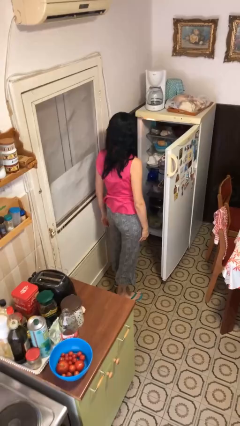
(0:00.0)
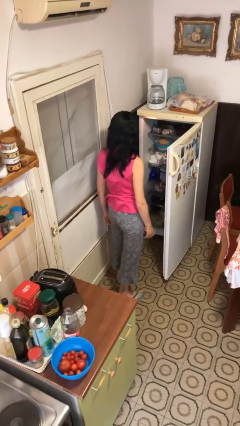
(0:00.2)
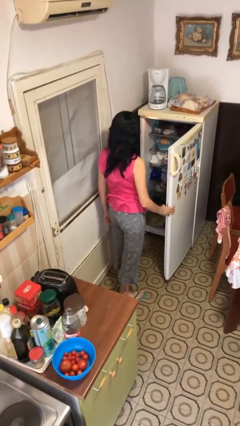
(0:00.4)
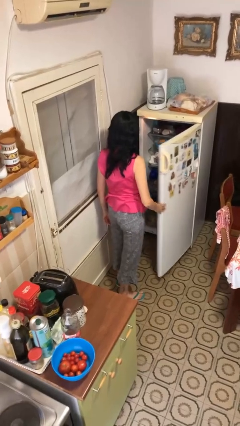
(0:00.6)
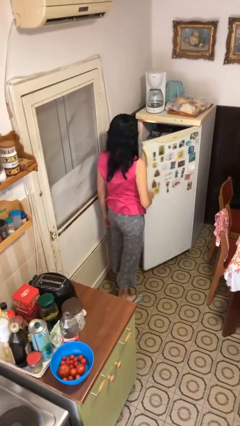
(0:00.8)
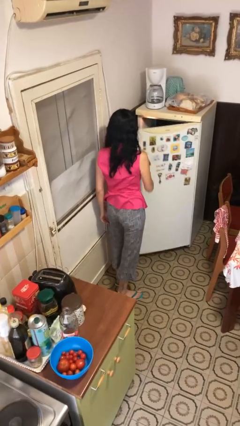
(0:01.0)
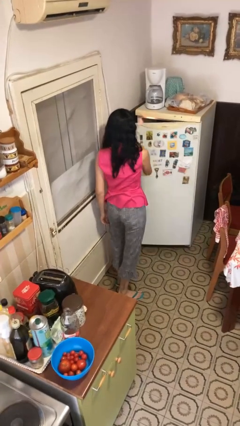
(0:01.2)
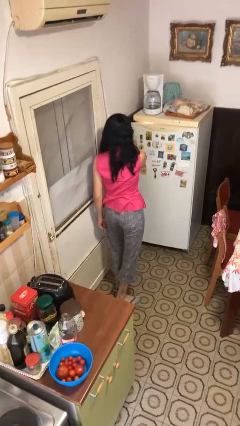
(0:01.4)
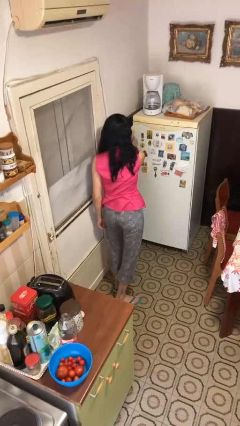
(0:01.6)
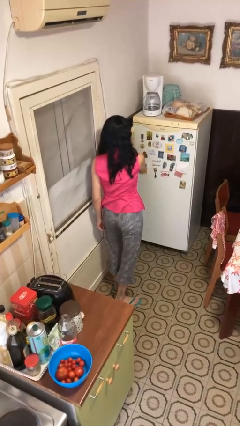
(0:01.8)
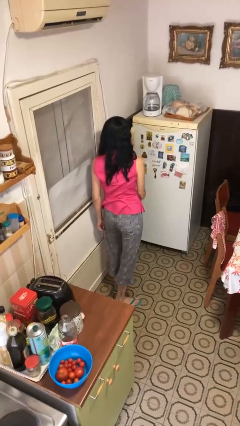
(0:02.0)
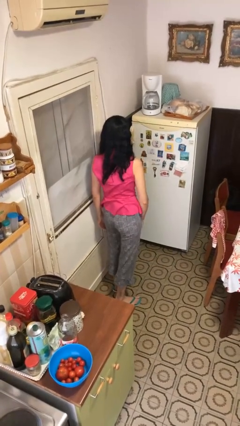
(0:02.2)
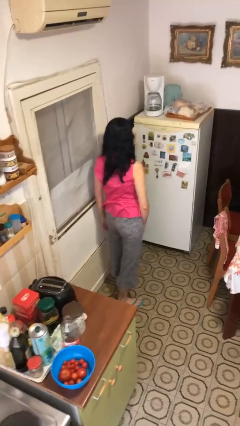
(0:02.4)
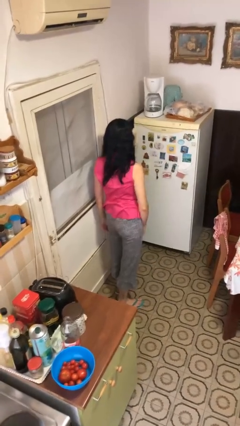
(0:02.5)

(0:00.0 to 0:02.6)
person closes refrigerator

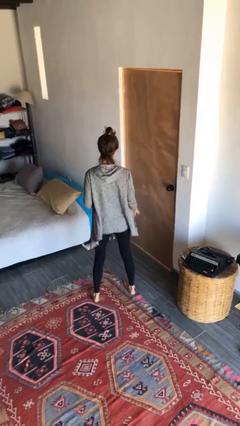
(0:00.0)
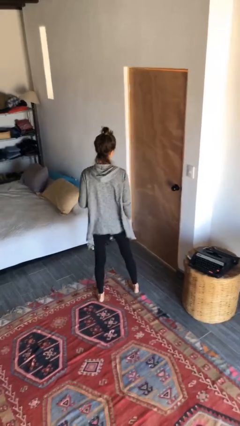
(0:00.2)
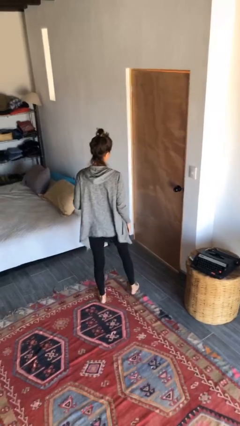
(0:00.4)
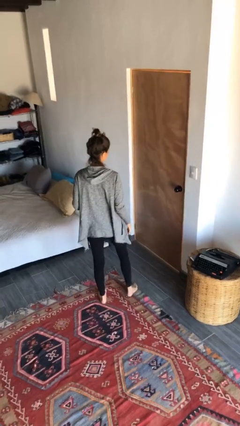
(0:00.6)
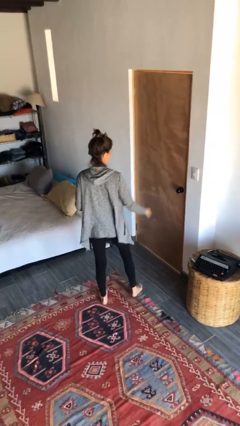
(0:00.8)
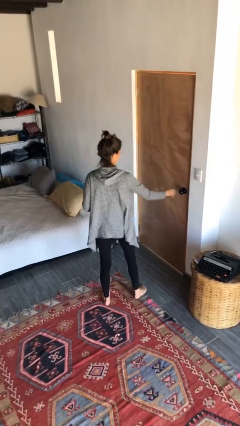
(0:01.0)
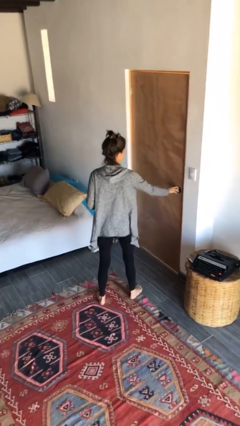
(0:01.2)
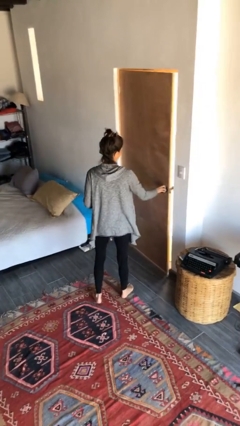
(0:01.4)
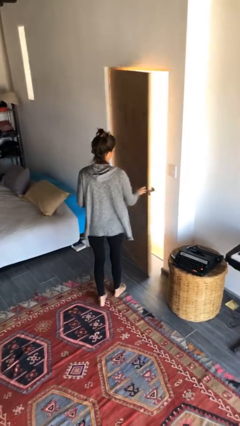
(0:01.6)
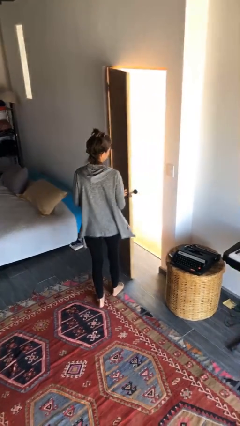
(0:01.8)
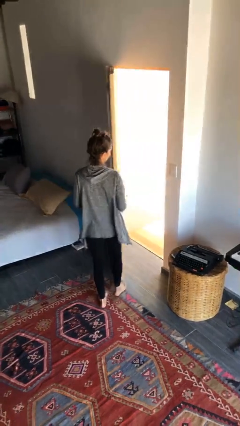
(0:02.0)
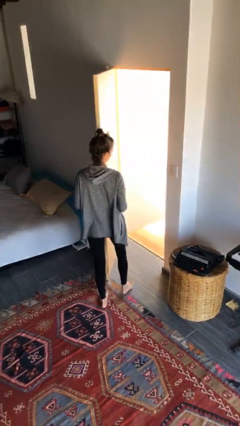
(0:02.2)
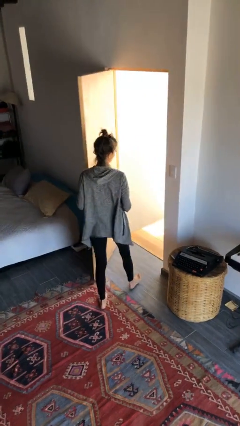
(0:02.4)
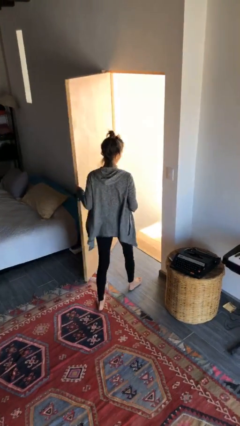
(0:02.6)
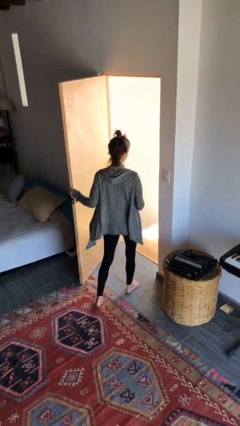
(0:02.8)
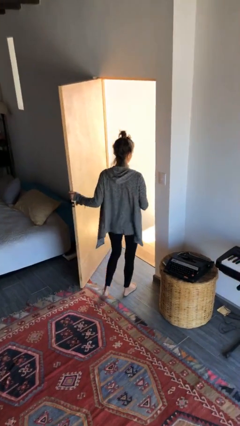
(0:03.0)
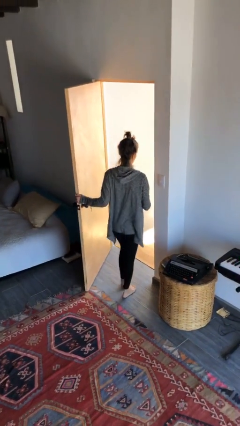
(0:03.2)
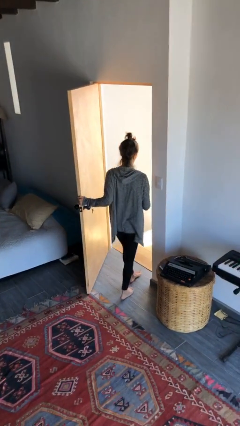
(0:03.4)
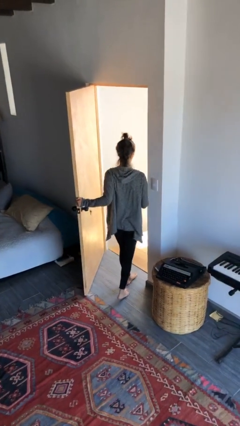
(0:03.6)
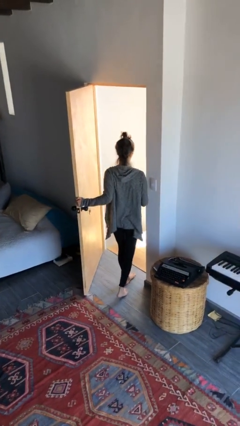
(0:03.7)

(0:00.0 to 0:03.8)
person opens facility door

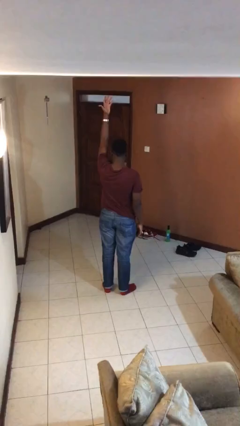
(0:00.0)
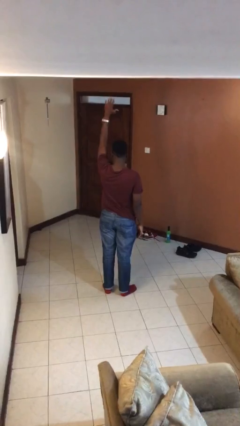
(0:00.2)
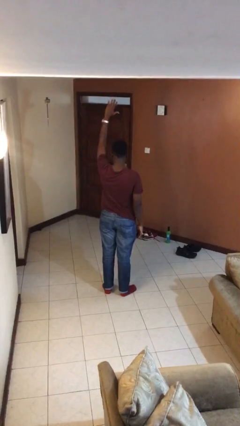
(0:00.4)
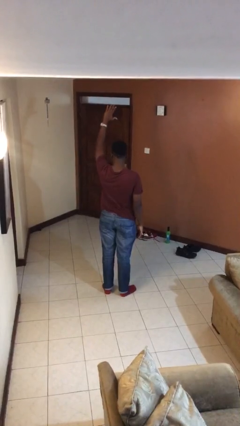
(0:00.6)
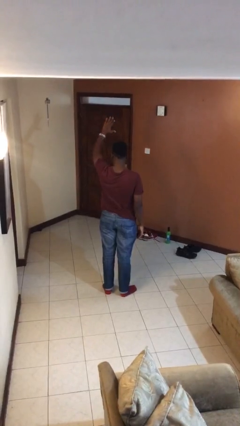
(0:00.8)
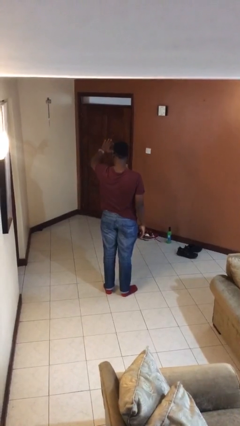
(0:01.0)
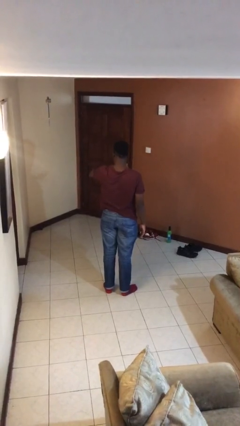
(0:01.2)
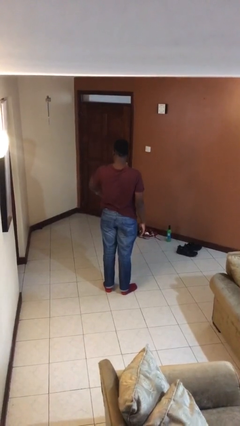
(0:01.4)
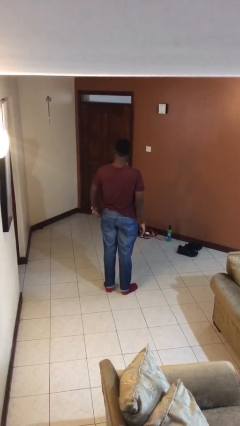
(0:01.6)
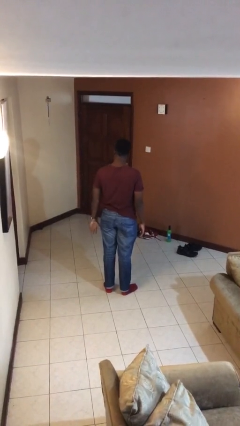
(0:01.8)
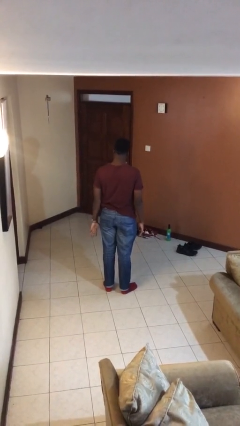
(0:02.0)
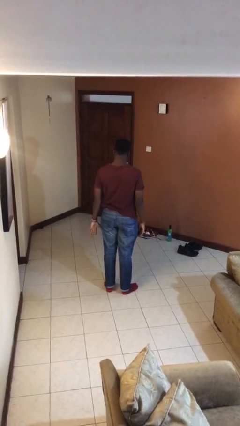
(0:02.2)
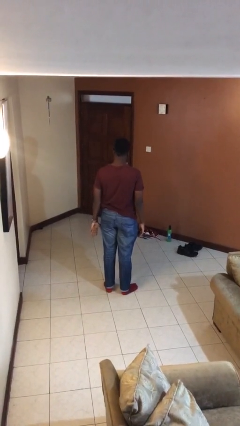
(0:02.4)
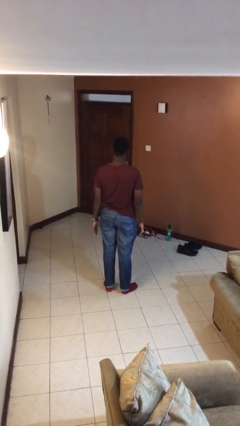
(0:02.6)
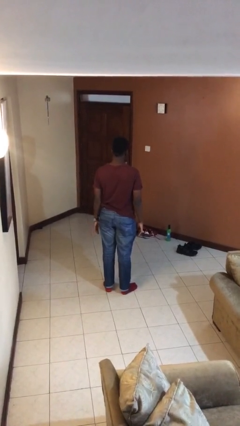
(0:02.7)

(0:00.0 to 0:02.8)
person gestures swipe down

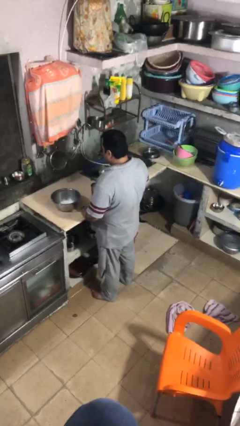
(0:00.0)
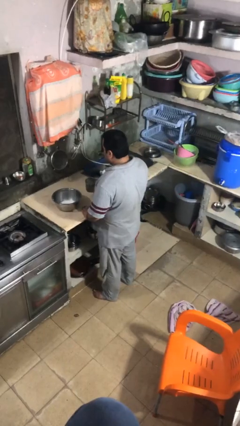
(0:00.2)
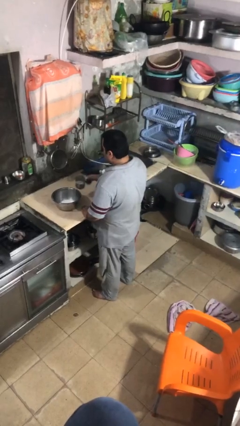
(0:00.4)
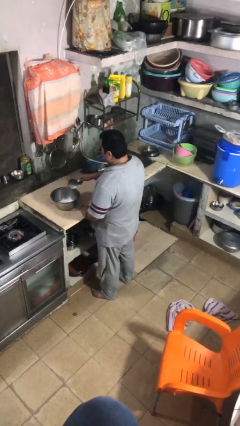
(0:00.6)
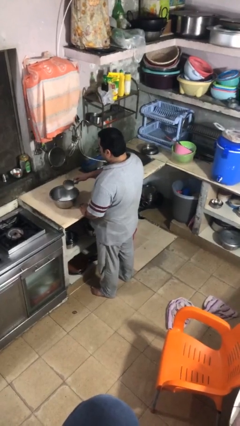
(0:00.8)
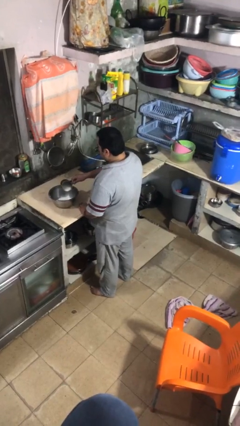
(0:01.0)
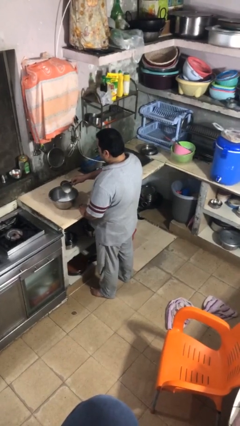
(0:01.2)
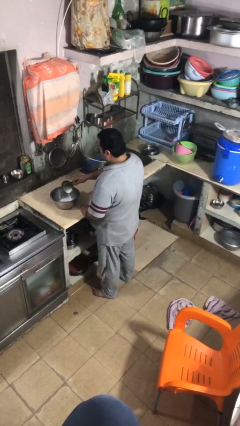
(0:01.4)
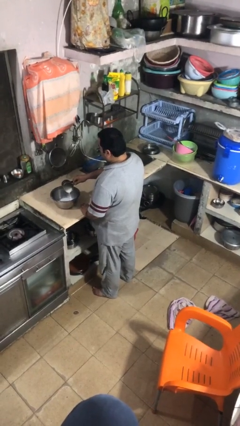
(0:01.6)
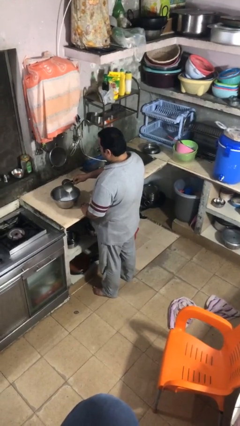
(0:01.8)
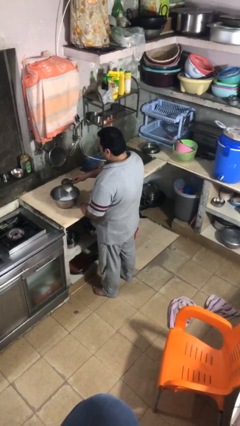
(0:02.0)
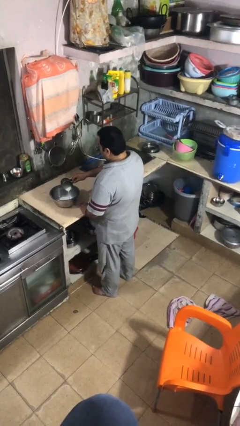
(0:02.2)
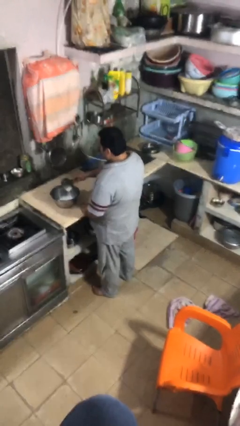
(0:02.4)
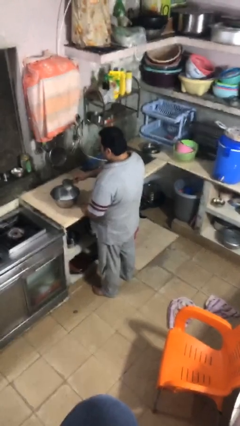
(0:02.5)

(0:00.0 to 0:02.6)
person pours into bowl

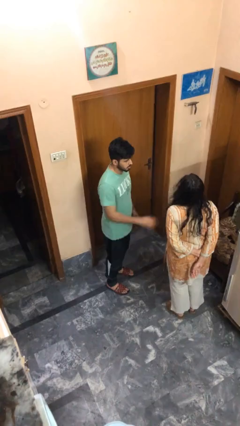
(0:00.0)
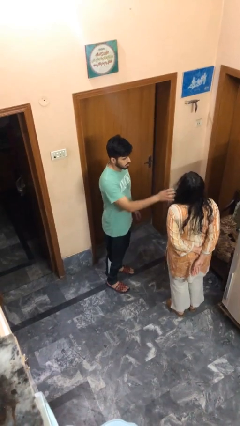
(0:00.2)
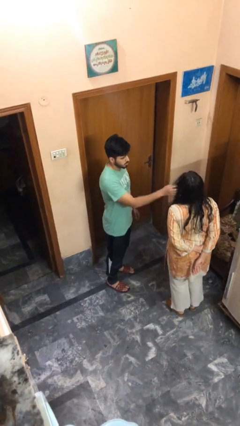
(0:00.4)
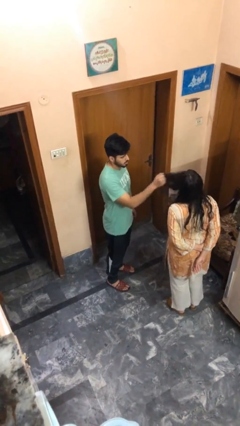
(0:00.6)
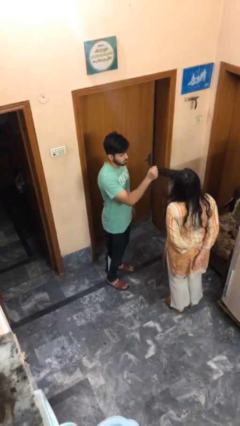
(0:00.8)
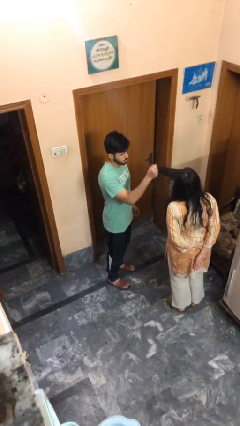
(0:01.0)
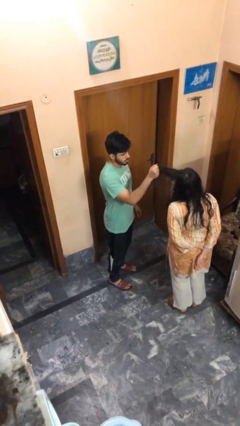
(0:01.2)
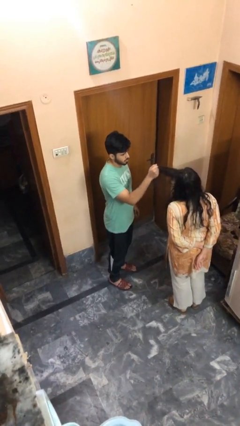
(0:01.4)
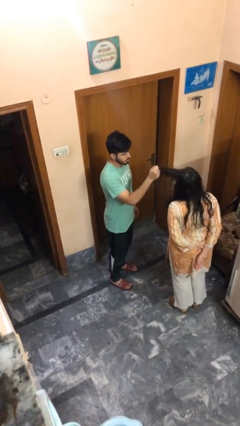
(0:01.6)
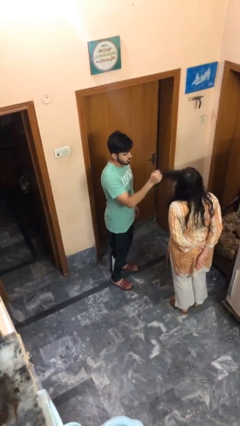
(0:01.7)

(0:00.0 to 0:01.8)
person grabs person by hair

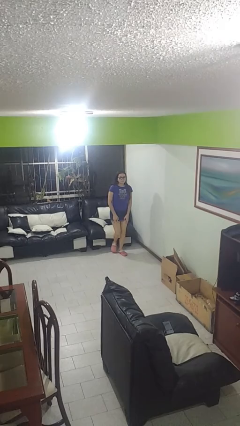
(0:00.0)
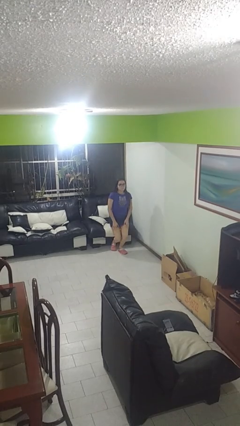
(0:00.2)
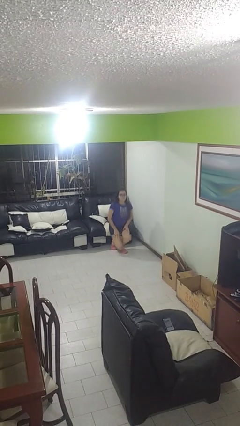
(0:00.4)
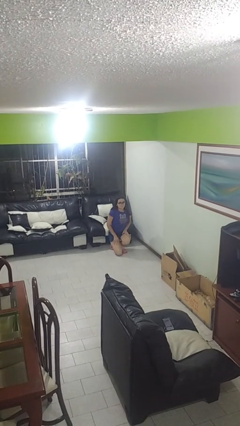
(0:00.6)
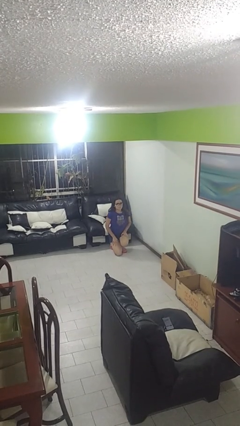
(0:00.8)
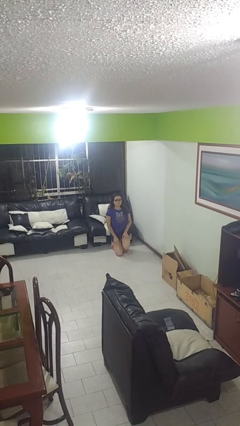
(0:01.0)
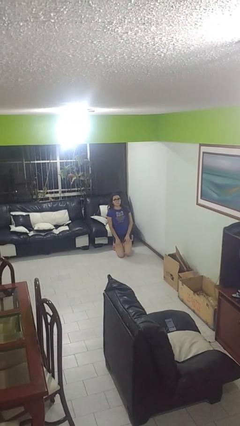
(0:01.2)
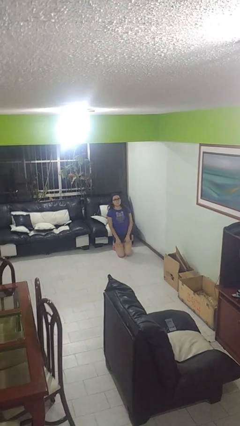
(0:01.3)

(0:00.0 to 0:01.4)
person kneels

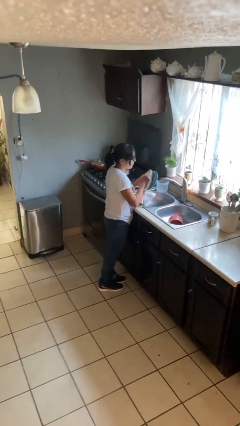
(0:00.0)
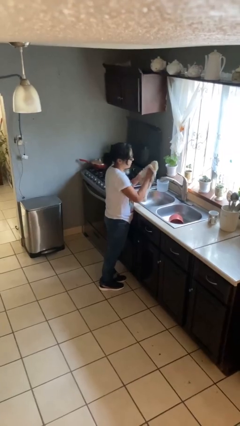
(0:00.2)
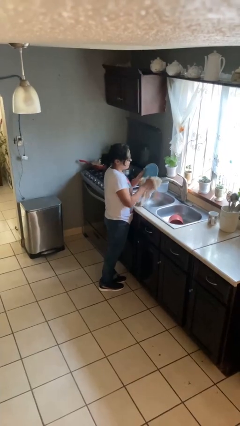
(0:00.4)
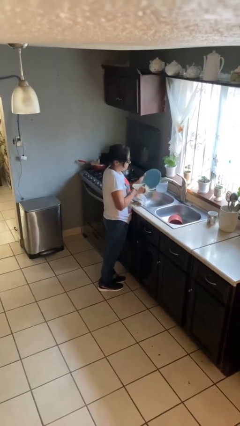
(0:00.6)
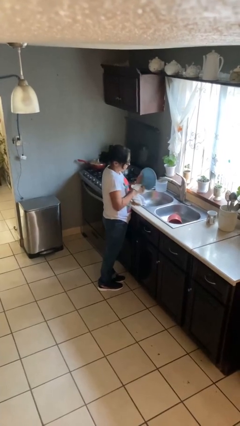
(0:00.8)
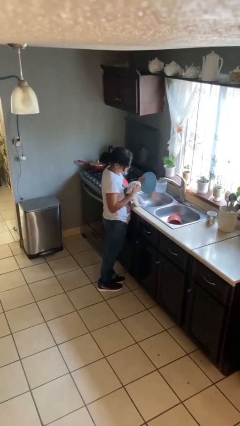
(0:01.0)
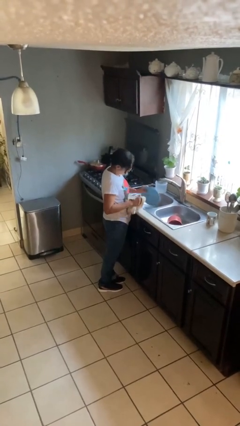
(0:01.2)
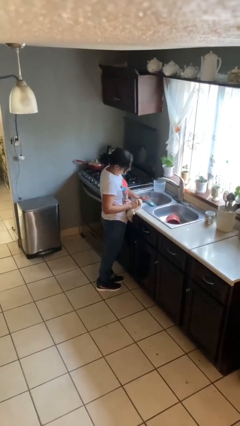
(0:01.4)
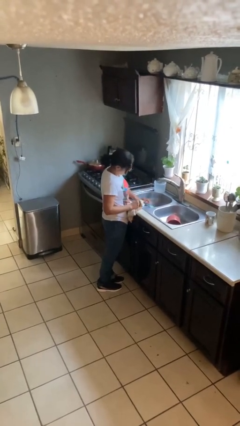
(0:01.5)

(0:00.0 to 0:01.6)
person dries dish

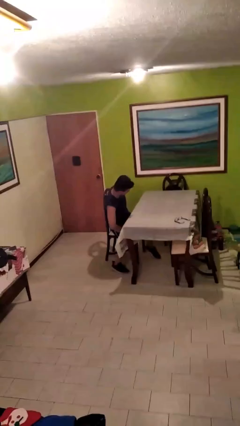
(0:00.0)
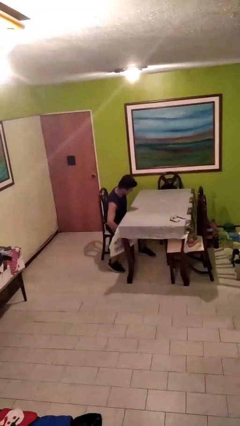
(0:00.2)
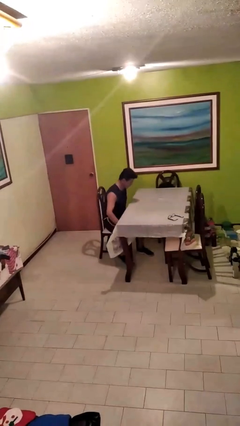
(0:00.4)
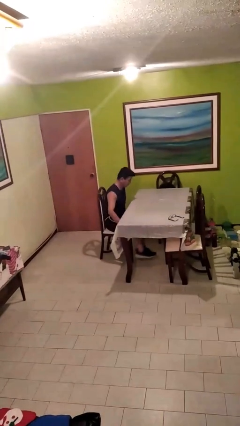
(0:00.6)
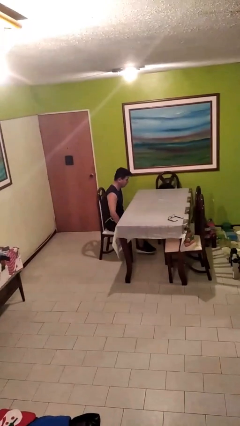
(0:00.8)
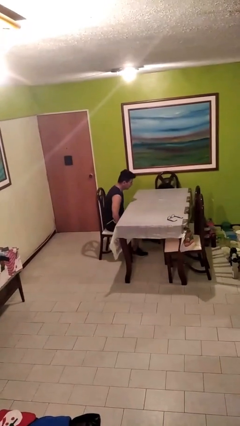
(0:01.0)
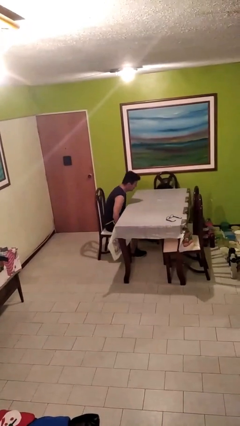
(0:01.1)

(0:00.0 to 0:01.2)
person sits down
